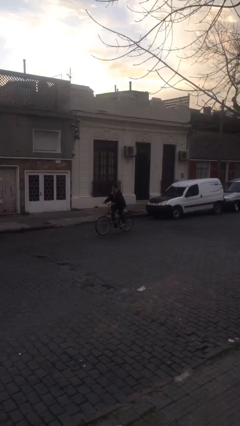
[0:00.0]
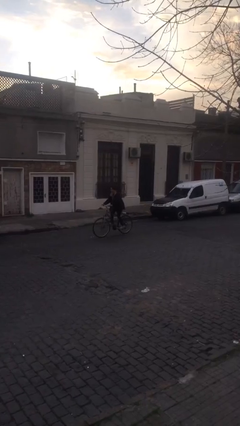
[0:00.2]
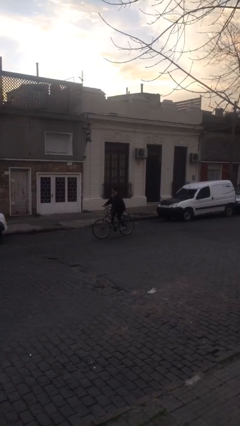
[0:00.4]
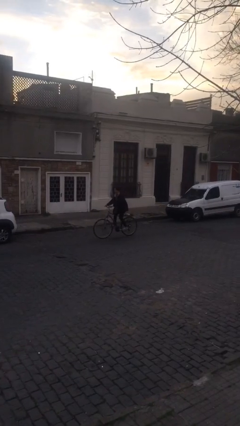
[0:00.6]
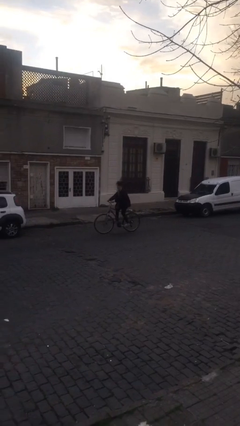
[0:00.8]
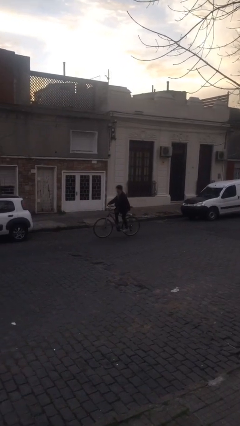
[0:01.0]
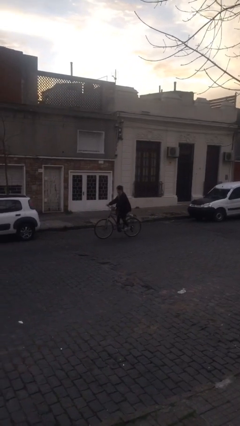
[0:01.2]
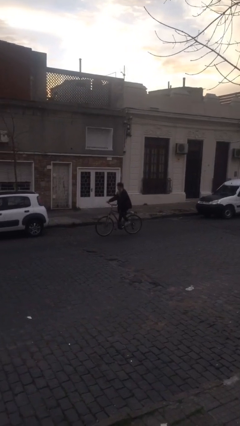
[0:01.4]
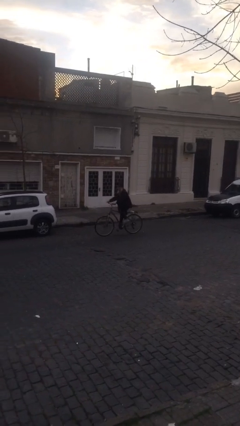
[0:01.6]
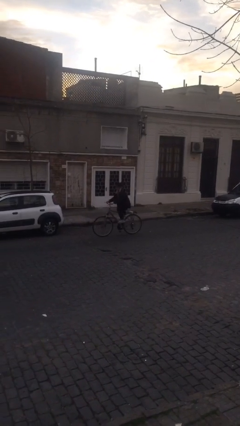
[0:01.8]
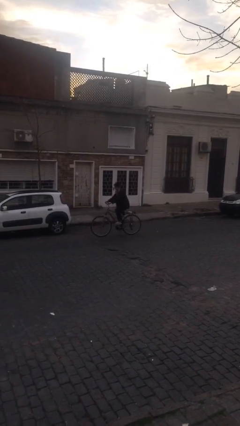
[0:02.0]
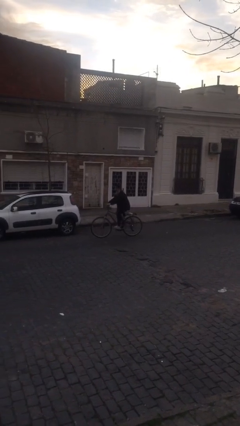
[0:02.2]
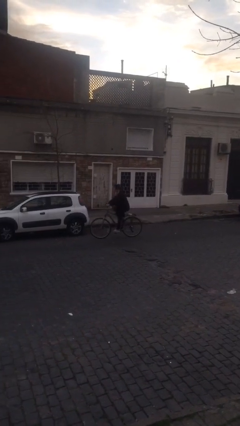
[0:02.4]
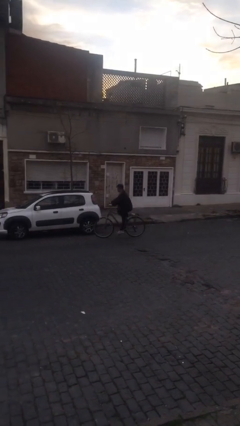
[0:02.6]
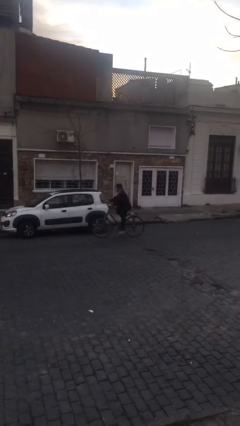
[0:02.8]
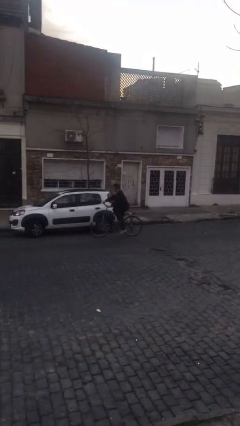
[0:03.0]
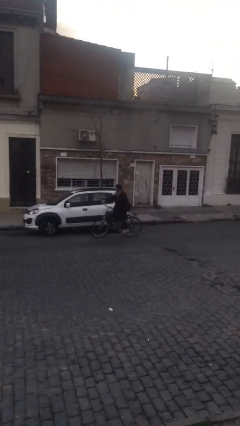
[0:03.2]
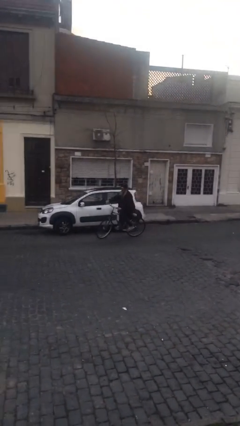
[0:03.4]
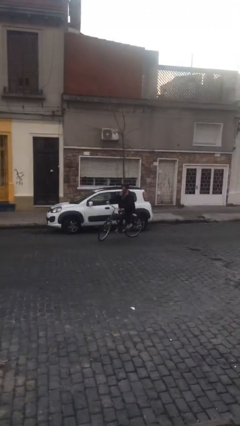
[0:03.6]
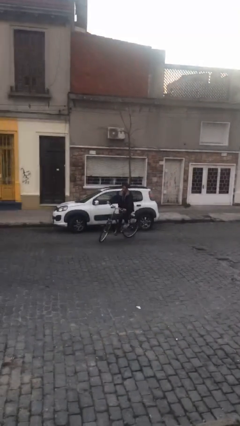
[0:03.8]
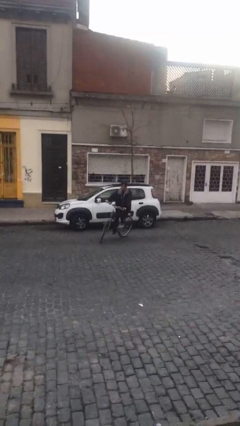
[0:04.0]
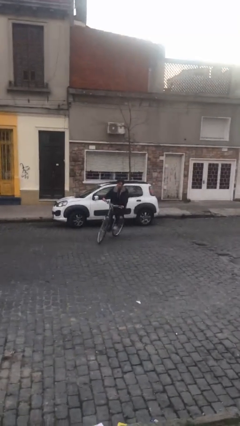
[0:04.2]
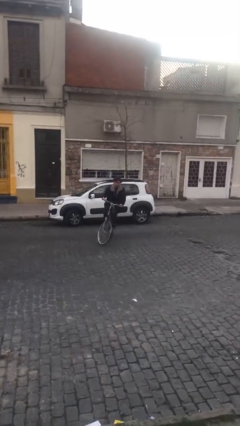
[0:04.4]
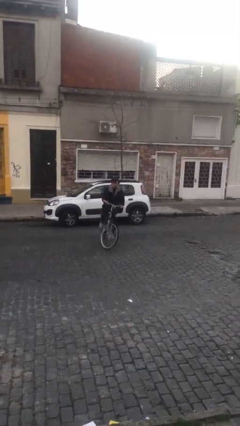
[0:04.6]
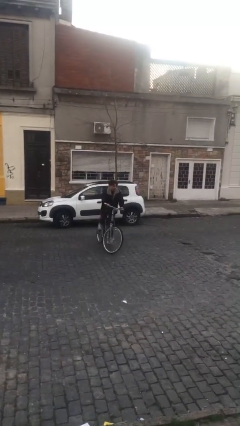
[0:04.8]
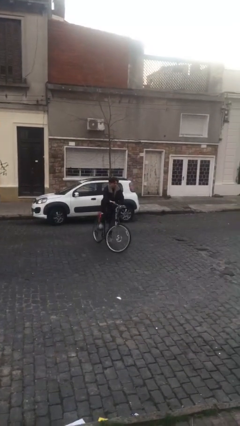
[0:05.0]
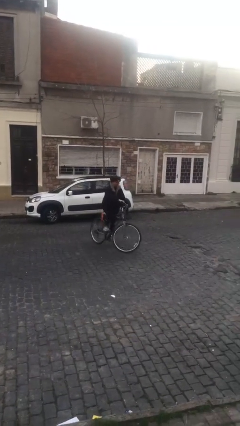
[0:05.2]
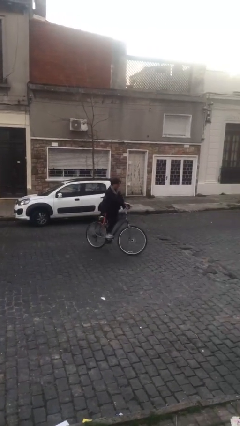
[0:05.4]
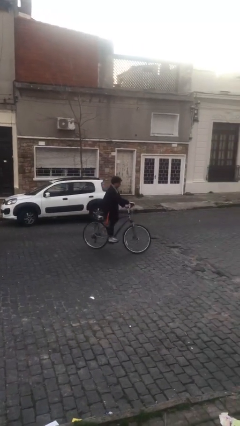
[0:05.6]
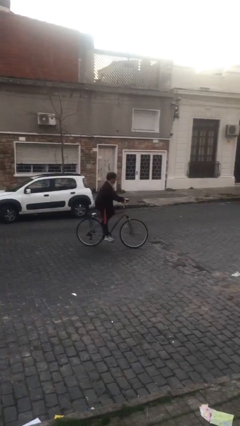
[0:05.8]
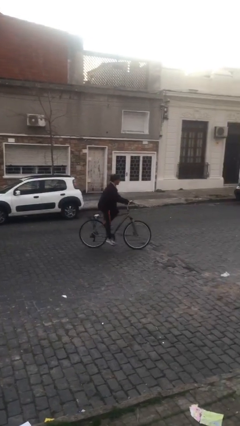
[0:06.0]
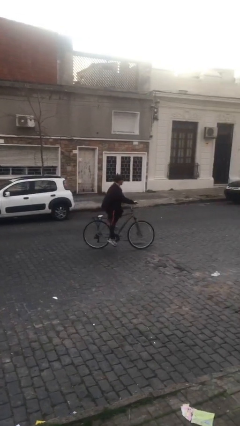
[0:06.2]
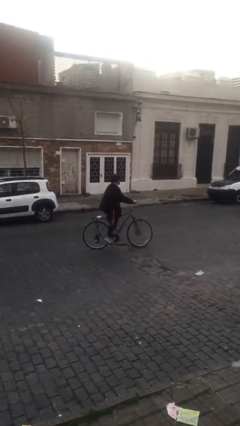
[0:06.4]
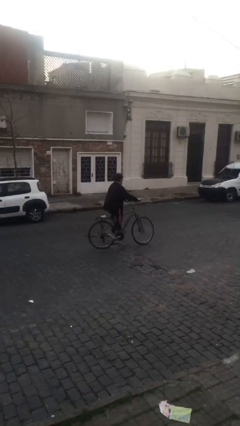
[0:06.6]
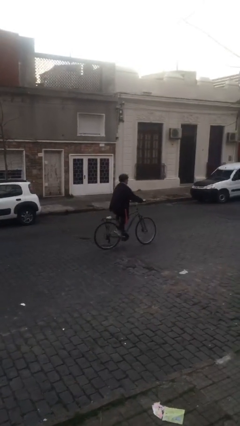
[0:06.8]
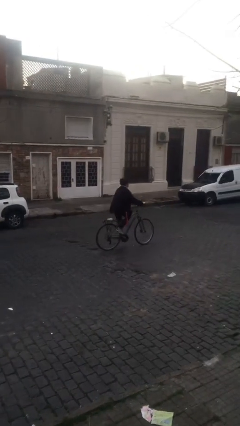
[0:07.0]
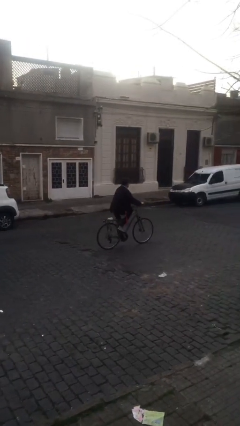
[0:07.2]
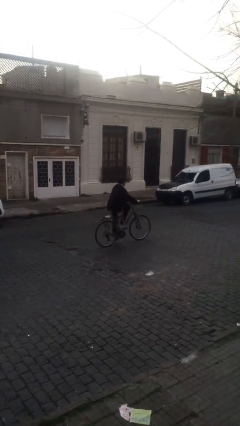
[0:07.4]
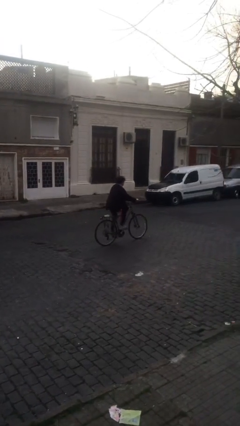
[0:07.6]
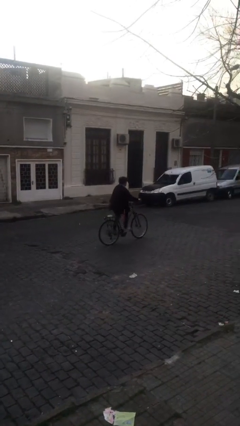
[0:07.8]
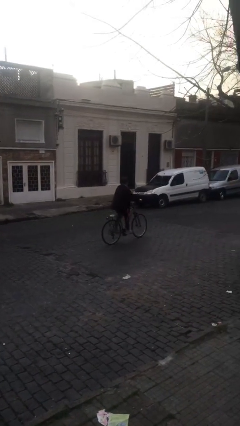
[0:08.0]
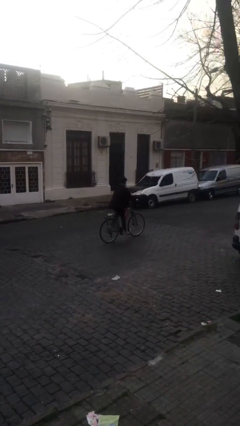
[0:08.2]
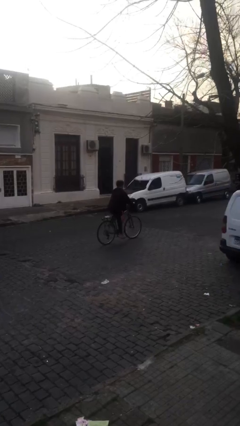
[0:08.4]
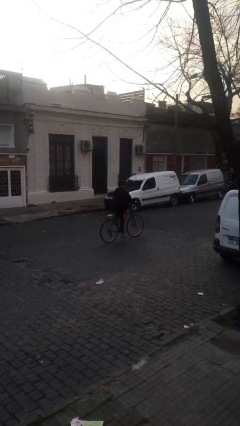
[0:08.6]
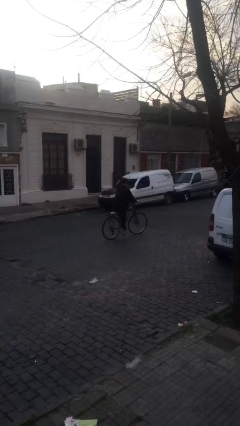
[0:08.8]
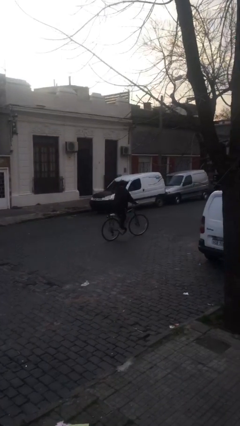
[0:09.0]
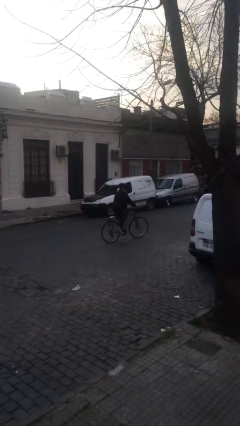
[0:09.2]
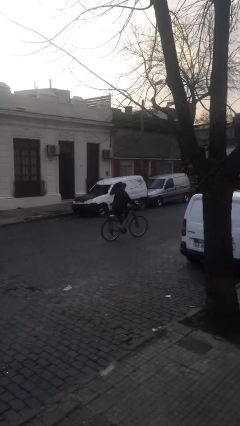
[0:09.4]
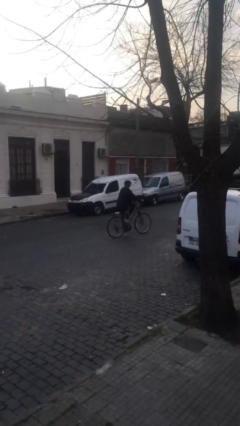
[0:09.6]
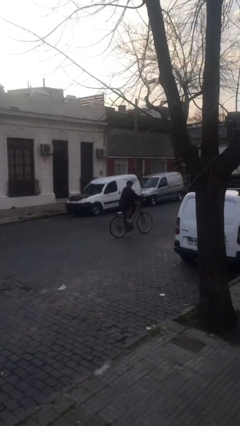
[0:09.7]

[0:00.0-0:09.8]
person rides bicycle

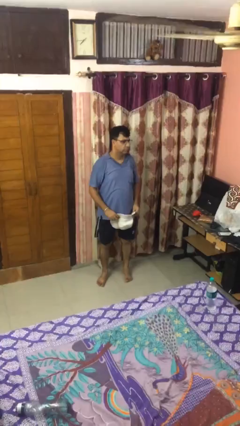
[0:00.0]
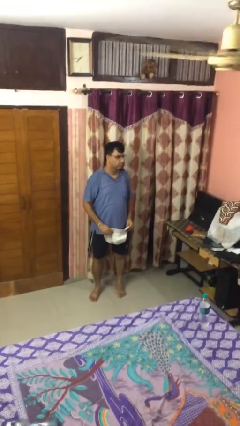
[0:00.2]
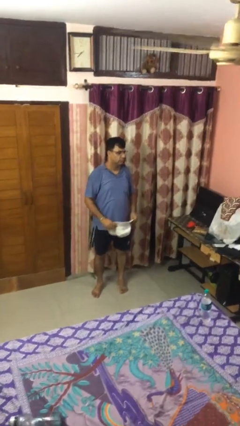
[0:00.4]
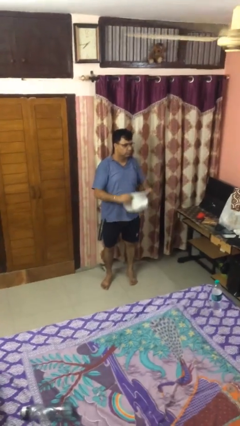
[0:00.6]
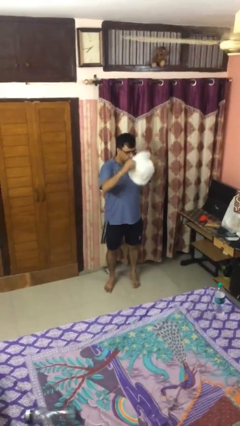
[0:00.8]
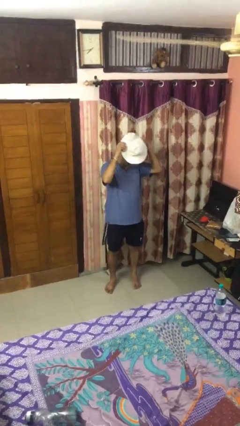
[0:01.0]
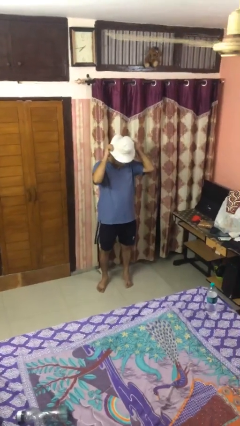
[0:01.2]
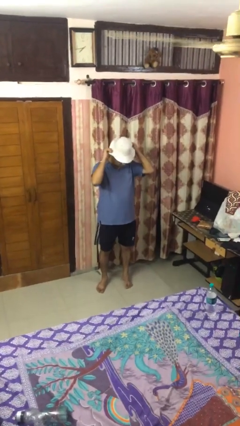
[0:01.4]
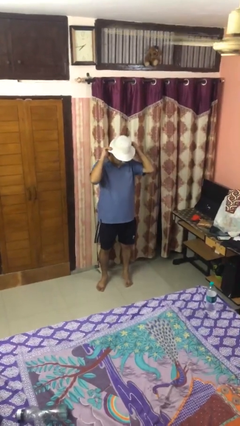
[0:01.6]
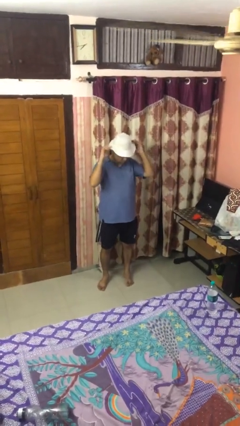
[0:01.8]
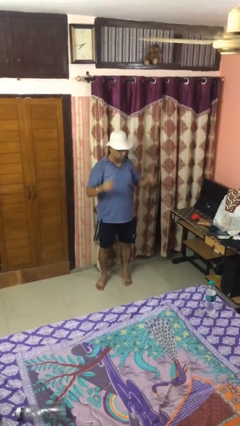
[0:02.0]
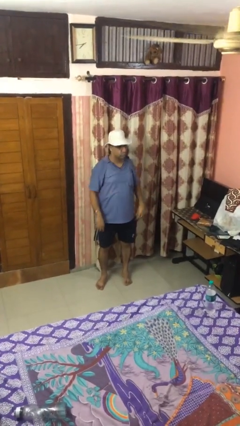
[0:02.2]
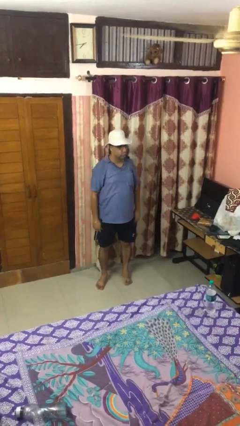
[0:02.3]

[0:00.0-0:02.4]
person puts on hat

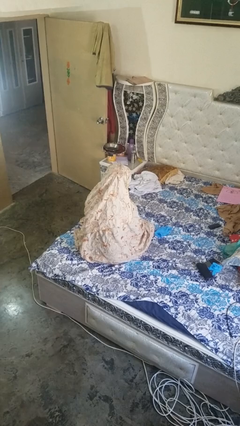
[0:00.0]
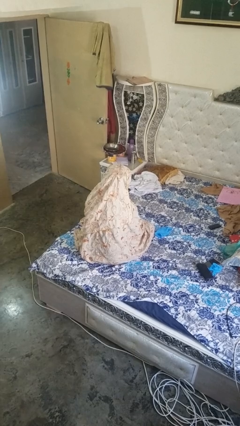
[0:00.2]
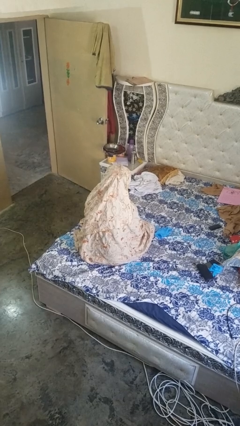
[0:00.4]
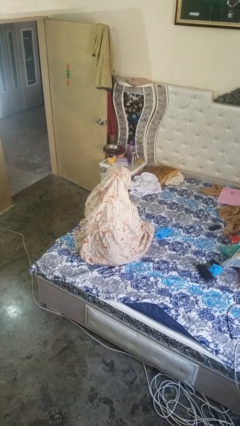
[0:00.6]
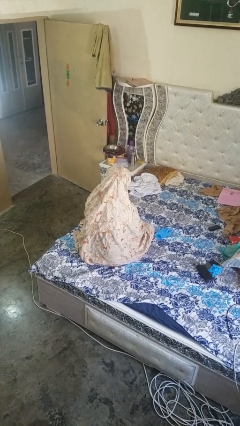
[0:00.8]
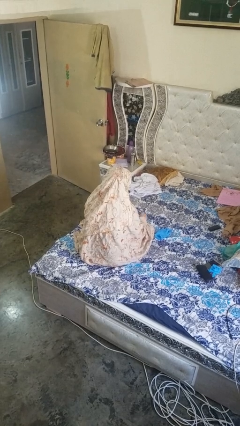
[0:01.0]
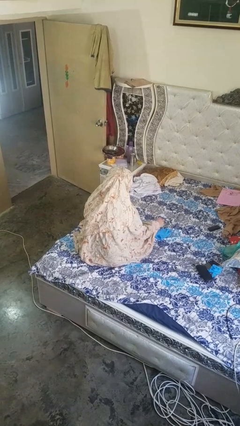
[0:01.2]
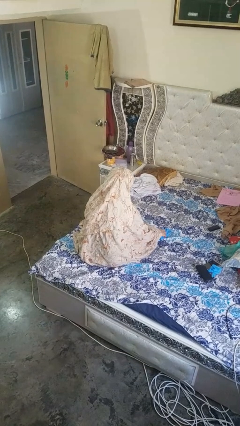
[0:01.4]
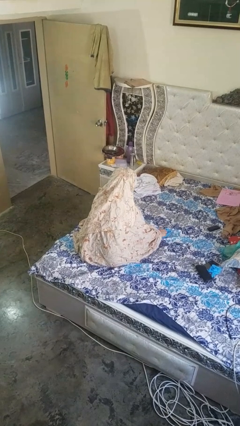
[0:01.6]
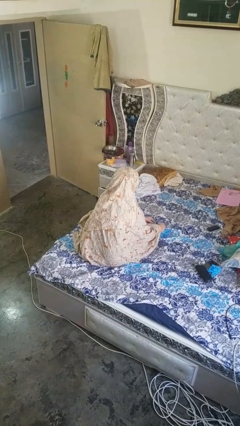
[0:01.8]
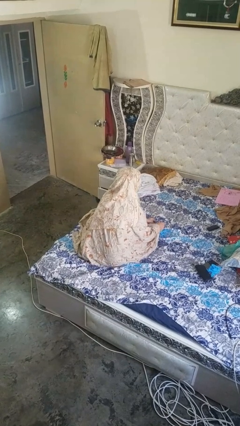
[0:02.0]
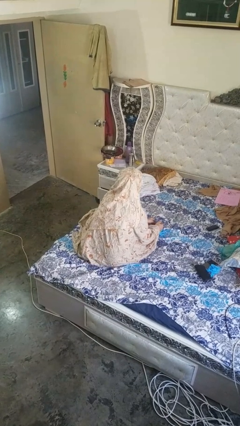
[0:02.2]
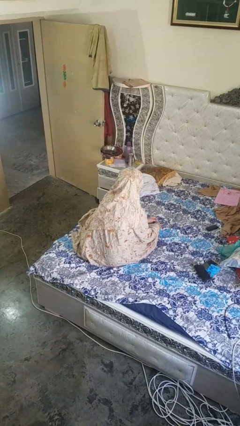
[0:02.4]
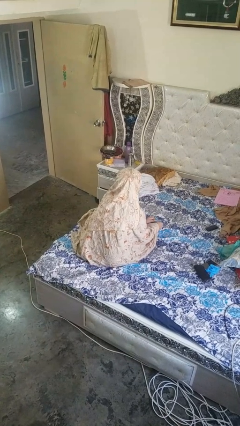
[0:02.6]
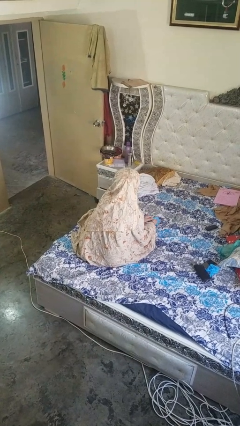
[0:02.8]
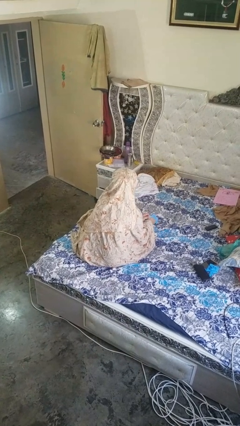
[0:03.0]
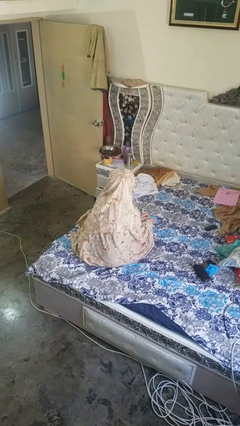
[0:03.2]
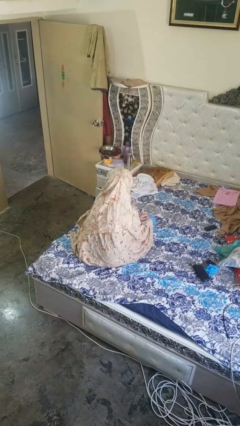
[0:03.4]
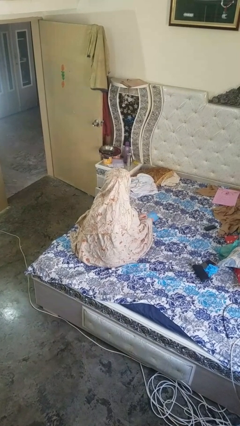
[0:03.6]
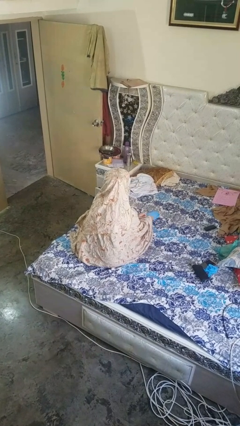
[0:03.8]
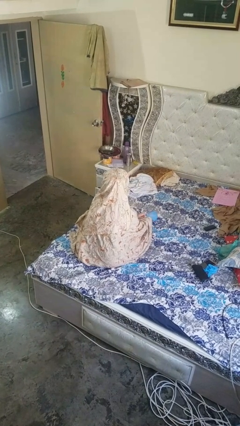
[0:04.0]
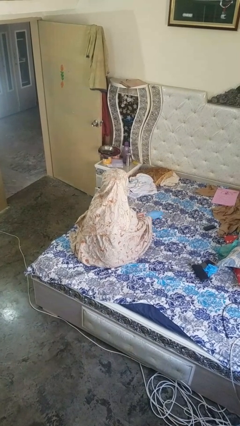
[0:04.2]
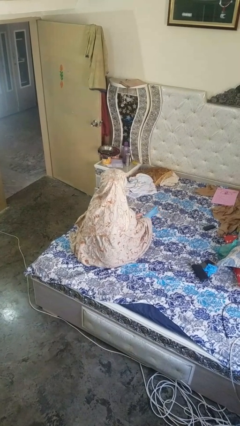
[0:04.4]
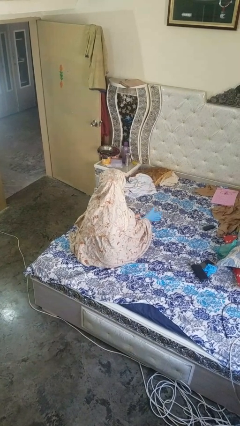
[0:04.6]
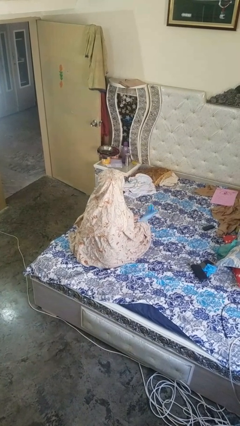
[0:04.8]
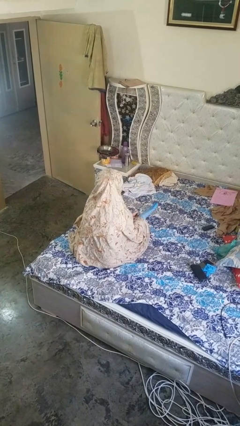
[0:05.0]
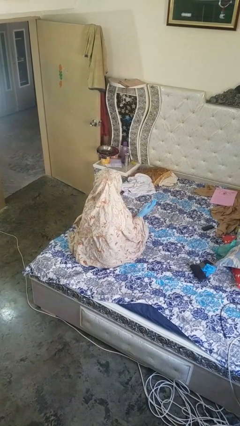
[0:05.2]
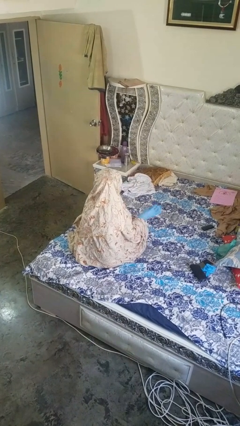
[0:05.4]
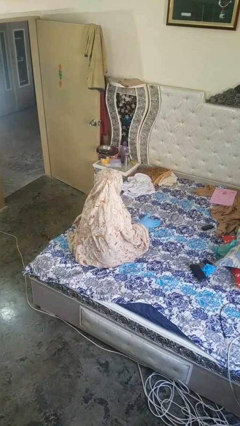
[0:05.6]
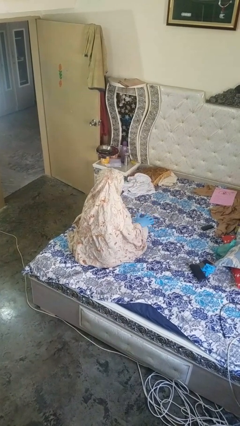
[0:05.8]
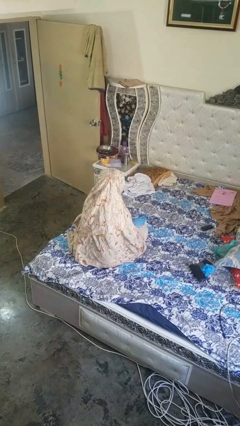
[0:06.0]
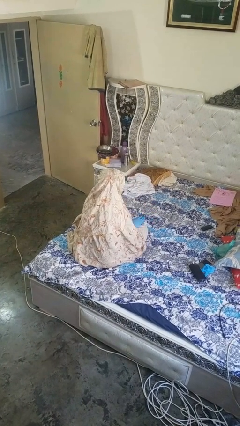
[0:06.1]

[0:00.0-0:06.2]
person puts on gloves
